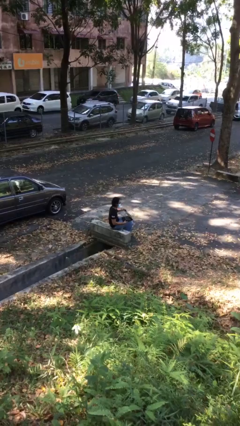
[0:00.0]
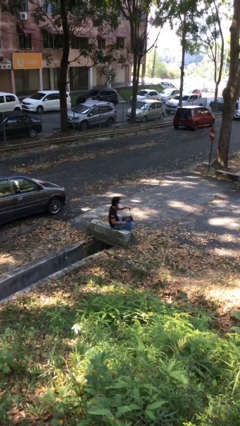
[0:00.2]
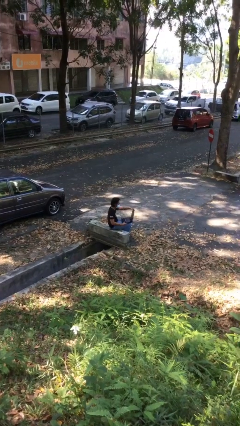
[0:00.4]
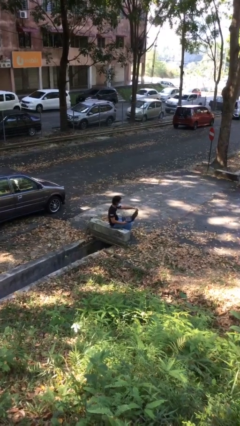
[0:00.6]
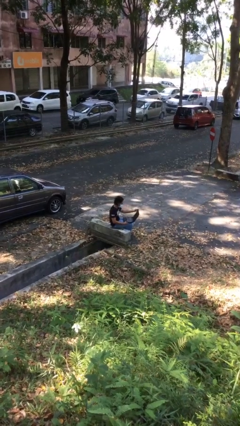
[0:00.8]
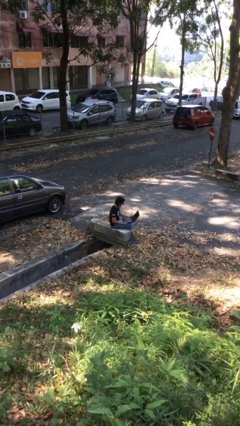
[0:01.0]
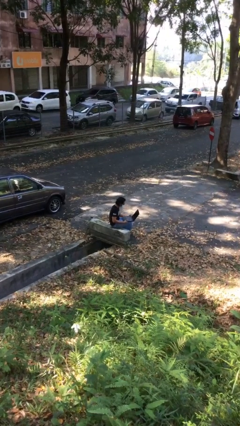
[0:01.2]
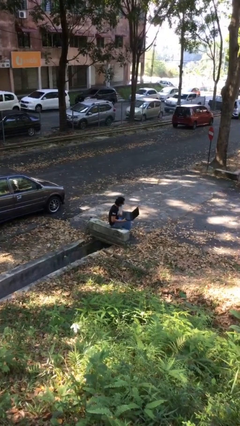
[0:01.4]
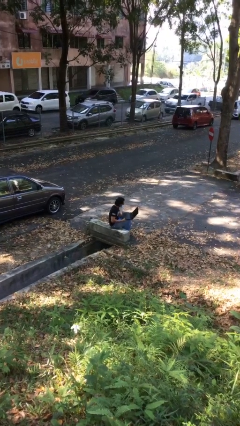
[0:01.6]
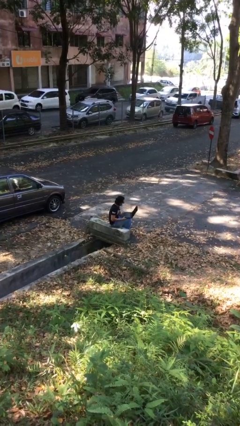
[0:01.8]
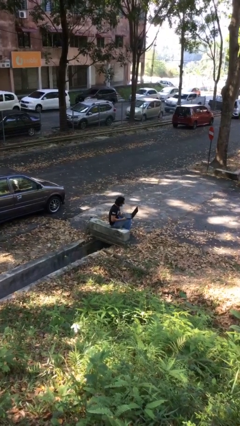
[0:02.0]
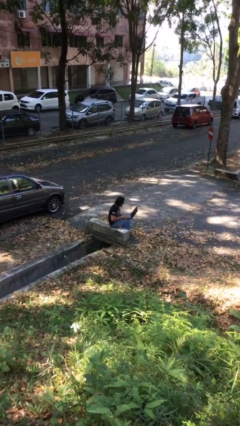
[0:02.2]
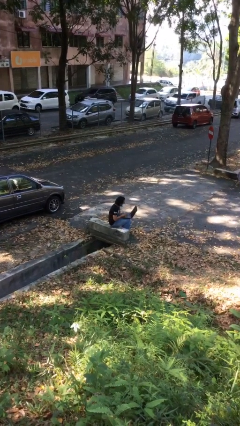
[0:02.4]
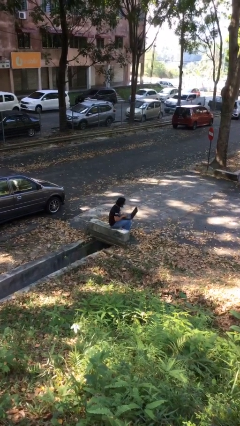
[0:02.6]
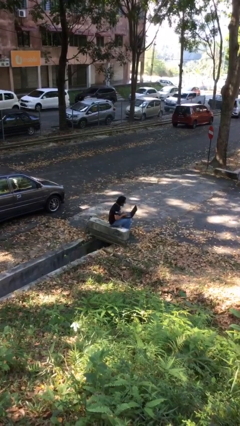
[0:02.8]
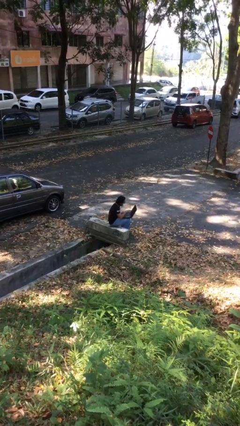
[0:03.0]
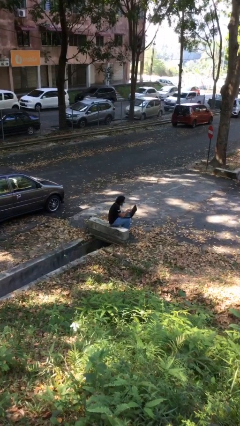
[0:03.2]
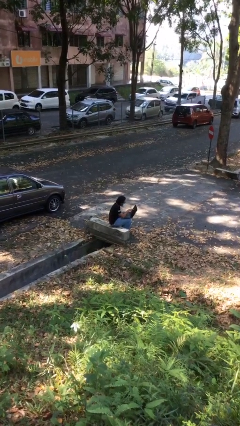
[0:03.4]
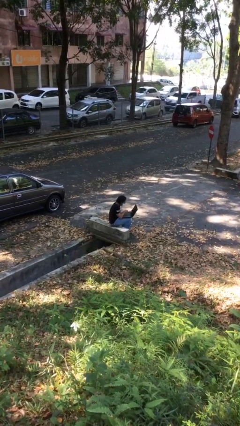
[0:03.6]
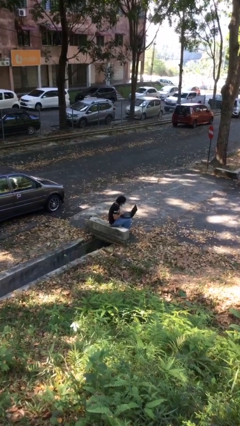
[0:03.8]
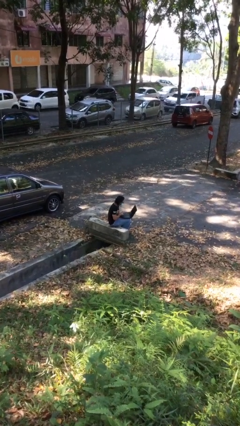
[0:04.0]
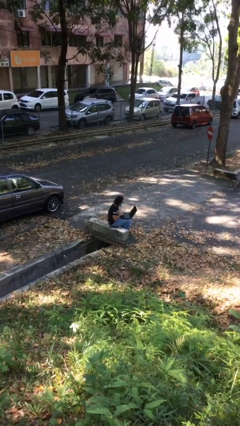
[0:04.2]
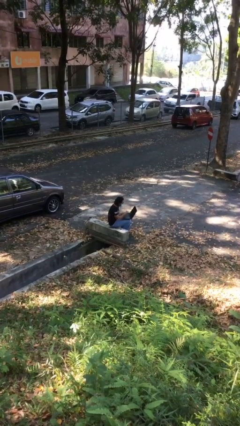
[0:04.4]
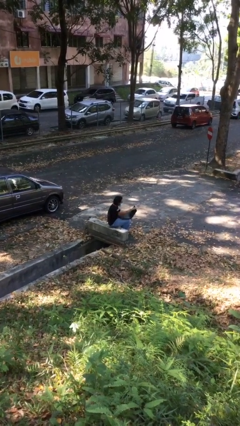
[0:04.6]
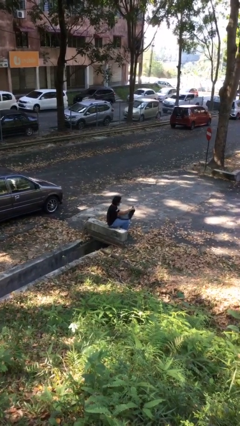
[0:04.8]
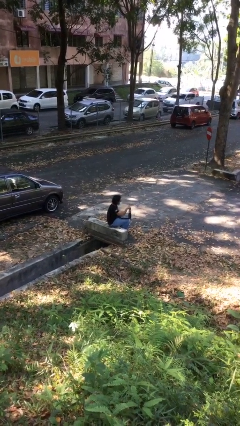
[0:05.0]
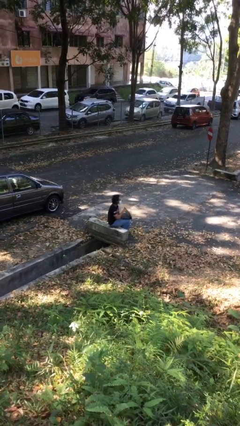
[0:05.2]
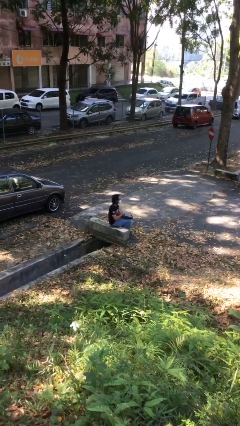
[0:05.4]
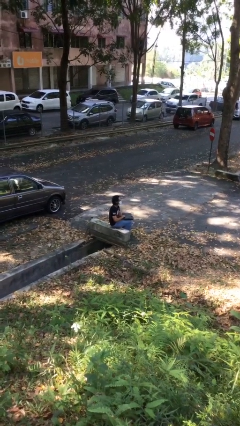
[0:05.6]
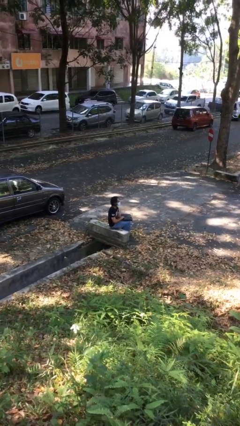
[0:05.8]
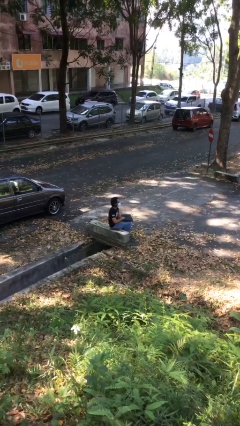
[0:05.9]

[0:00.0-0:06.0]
person interacts with laptop

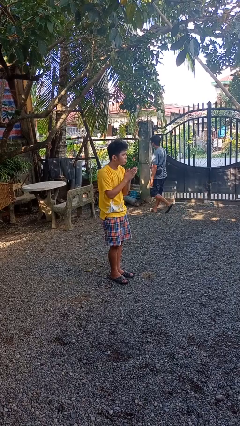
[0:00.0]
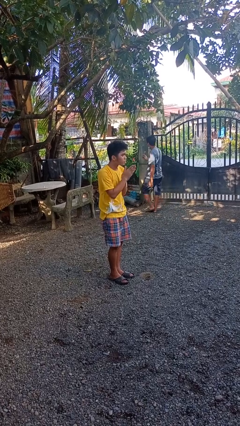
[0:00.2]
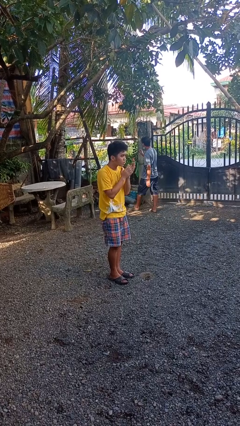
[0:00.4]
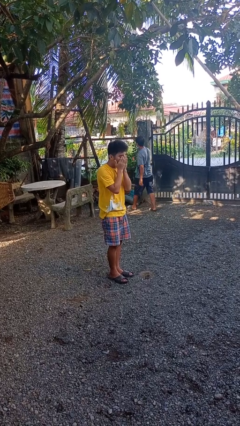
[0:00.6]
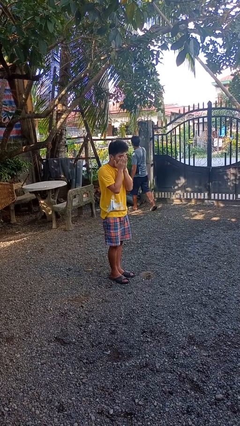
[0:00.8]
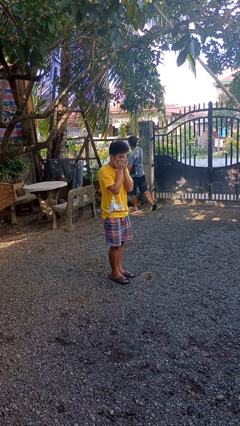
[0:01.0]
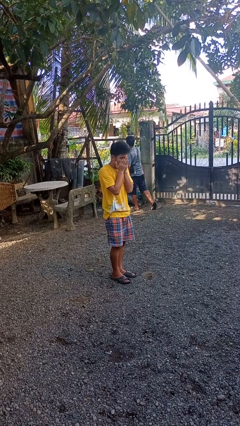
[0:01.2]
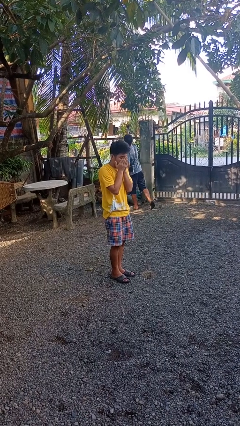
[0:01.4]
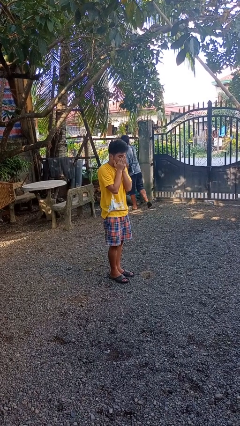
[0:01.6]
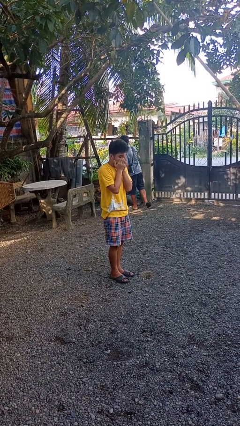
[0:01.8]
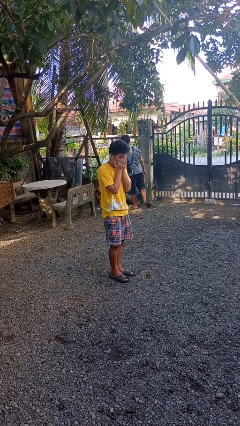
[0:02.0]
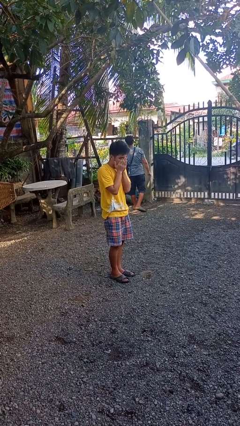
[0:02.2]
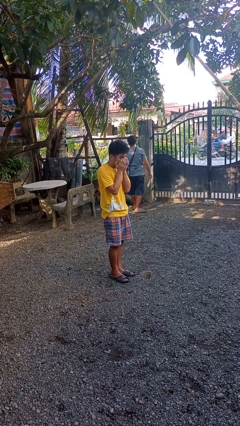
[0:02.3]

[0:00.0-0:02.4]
person blows into hands

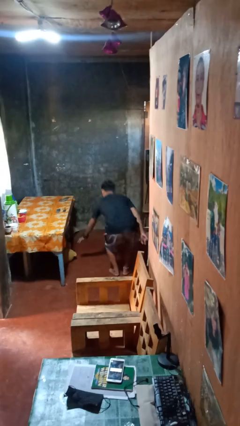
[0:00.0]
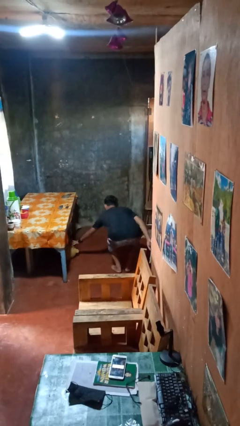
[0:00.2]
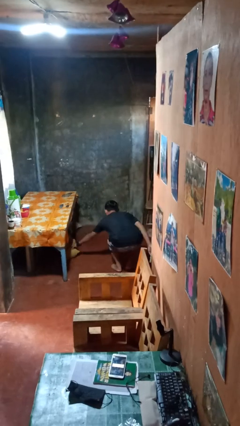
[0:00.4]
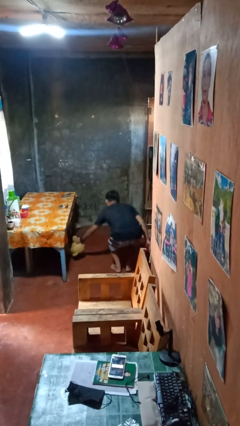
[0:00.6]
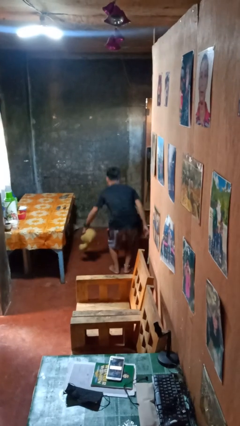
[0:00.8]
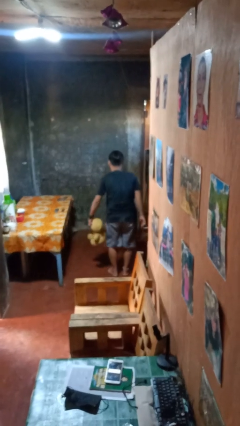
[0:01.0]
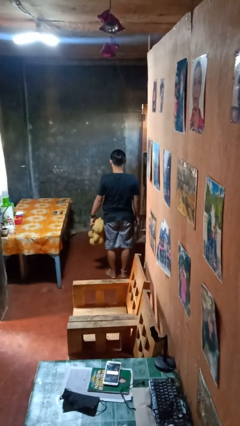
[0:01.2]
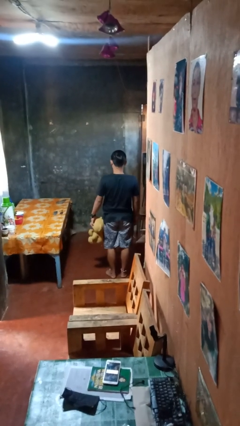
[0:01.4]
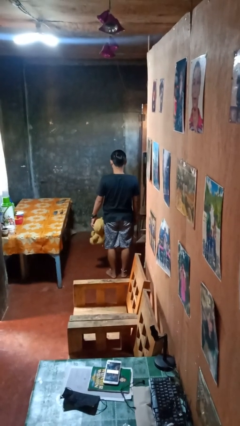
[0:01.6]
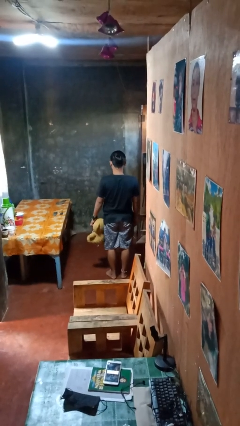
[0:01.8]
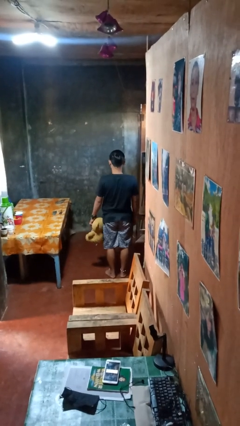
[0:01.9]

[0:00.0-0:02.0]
person picks up object from floor

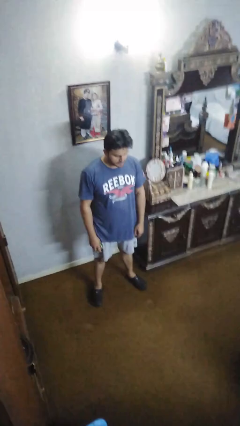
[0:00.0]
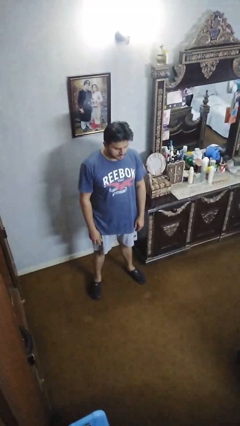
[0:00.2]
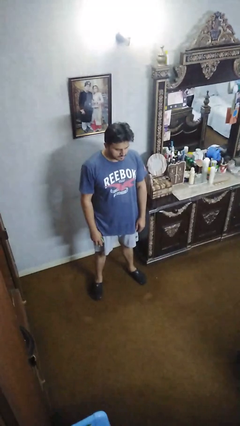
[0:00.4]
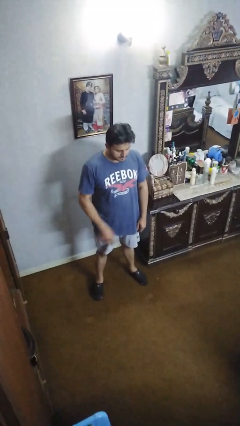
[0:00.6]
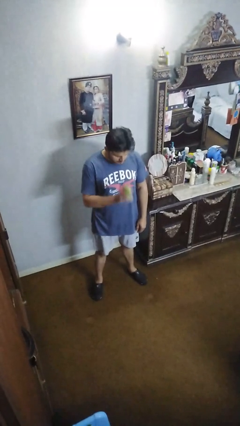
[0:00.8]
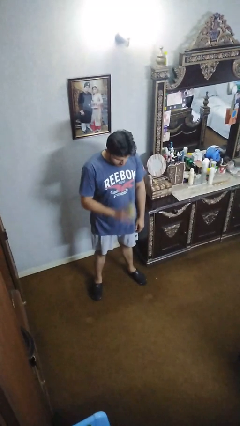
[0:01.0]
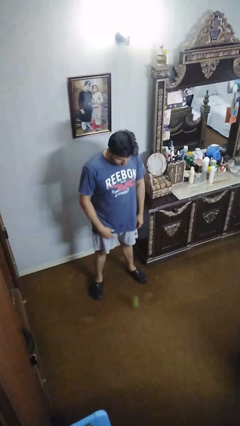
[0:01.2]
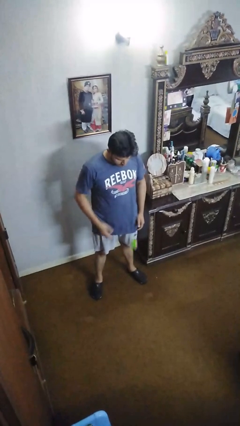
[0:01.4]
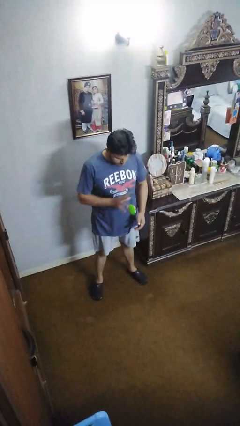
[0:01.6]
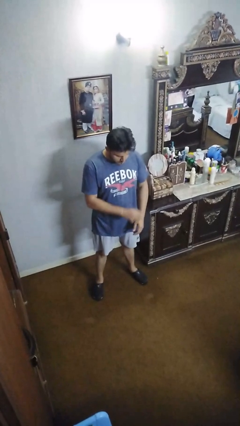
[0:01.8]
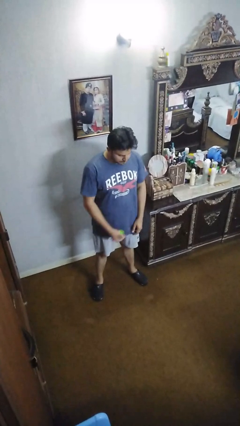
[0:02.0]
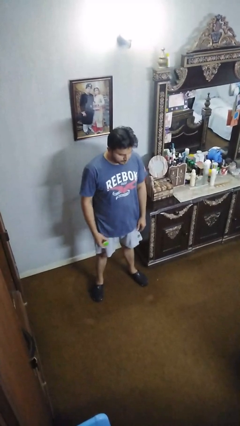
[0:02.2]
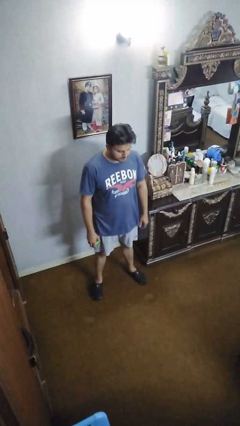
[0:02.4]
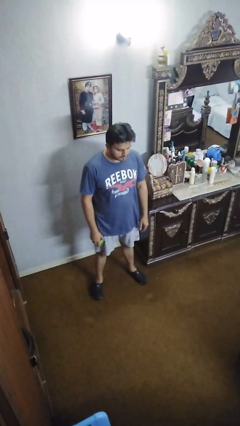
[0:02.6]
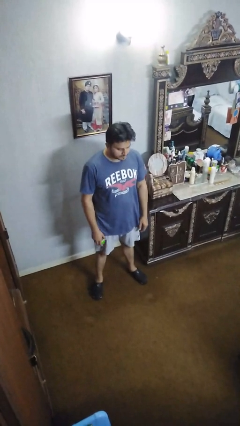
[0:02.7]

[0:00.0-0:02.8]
person bounces ball on floor

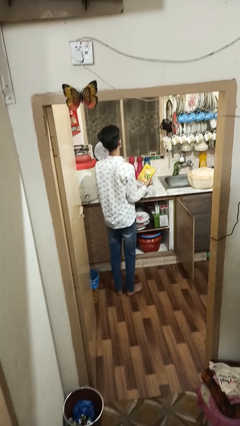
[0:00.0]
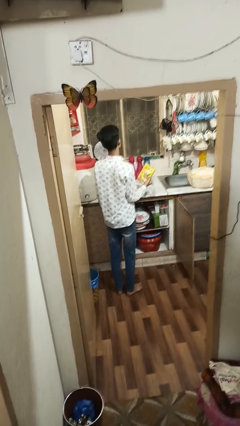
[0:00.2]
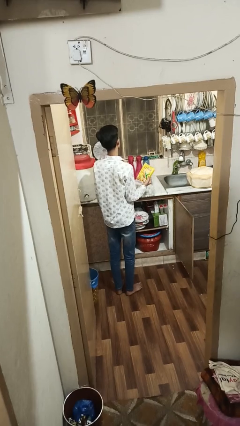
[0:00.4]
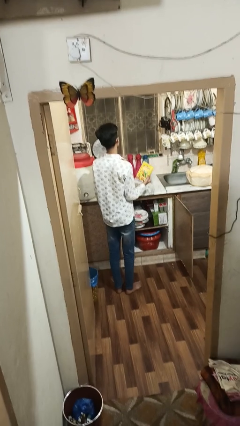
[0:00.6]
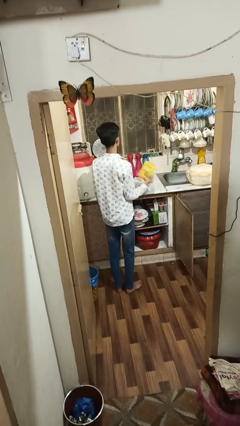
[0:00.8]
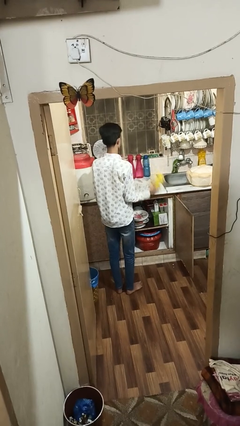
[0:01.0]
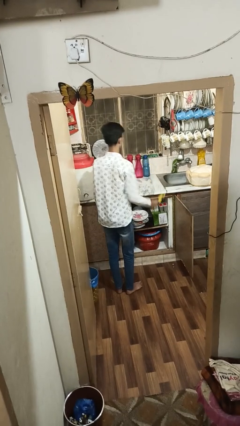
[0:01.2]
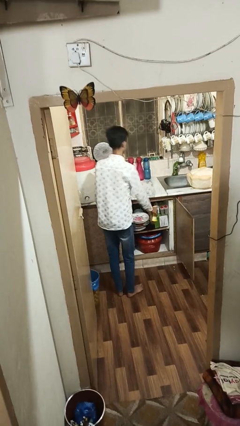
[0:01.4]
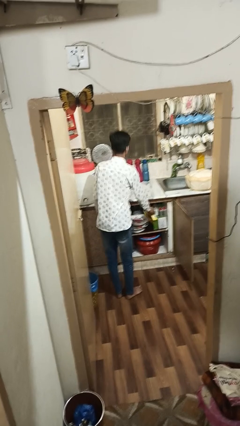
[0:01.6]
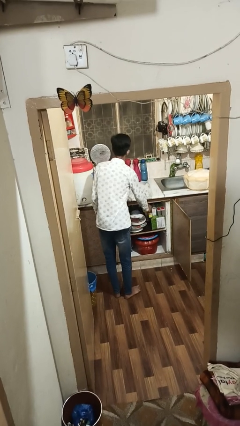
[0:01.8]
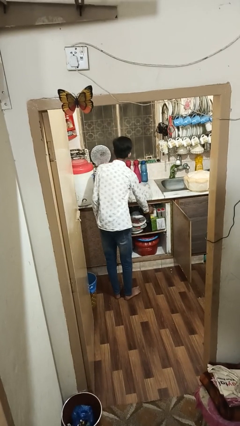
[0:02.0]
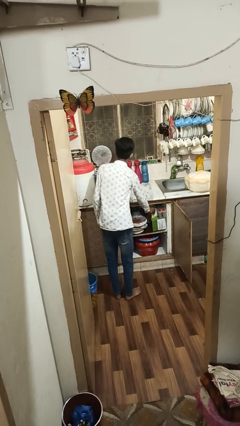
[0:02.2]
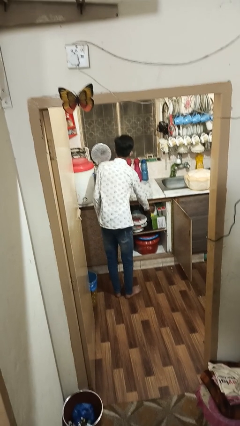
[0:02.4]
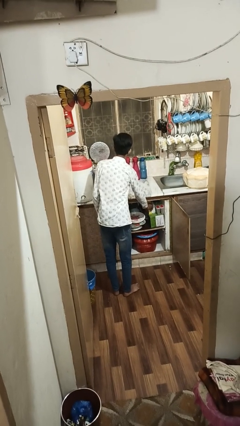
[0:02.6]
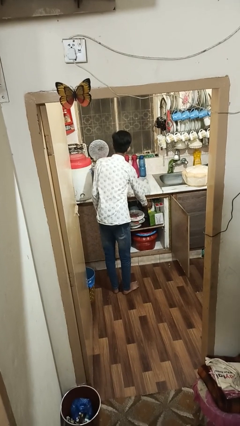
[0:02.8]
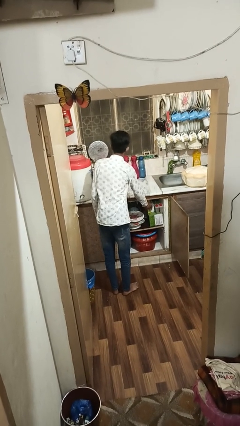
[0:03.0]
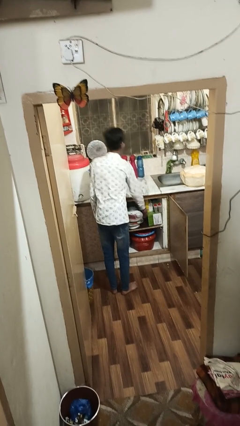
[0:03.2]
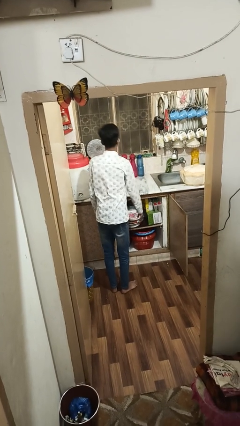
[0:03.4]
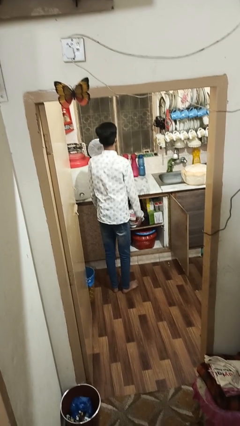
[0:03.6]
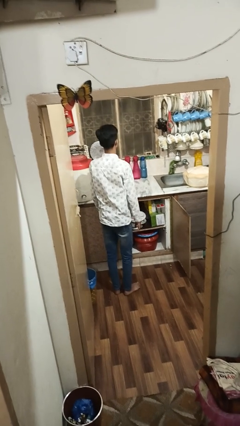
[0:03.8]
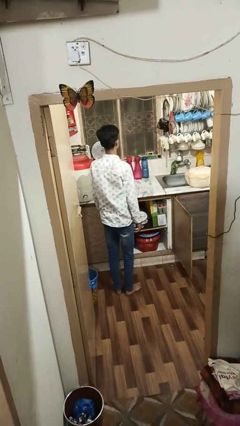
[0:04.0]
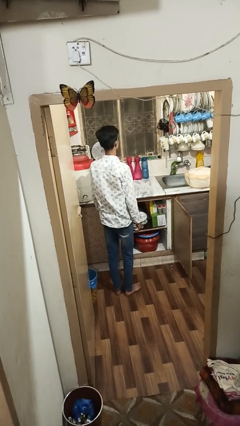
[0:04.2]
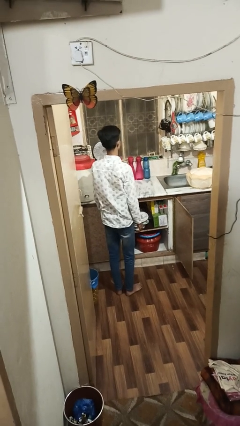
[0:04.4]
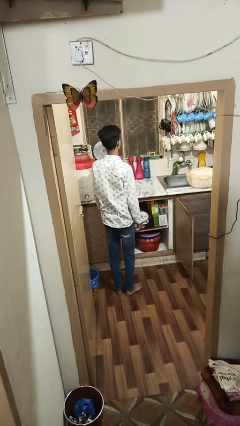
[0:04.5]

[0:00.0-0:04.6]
person puts object in cabinet
